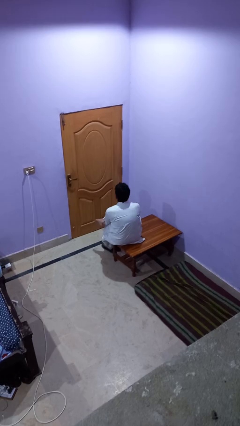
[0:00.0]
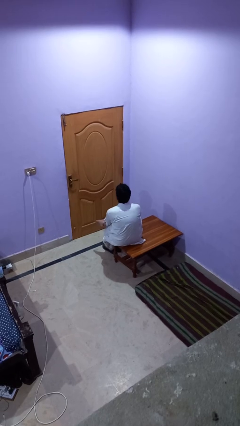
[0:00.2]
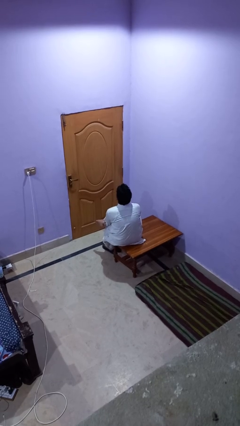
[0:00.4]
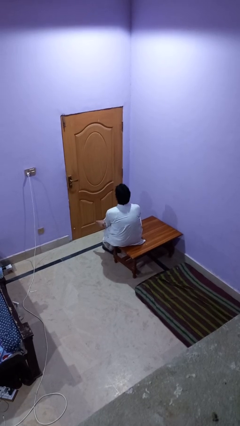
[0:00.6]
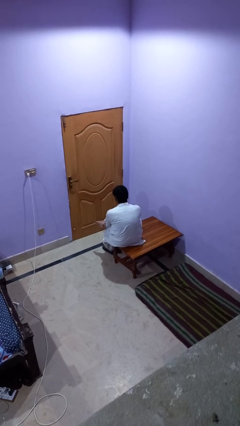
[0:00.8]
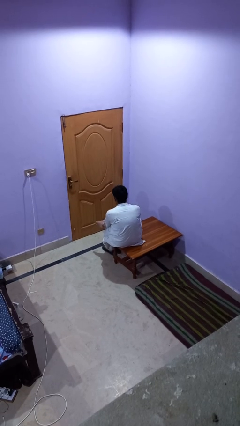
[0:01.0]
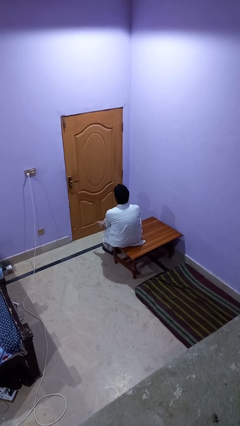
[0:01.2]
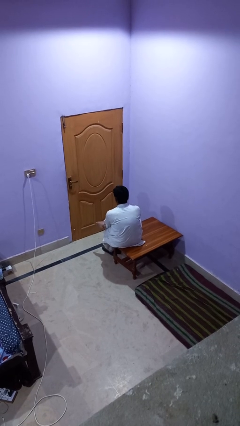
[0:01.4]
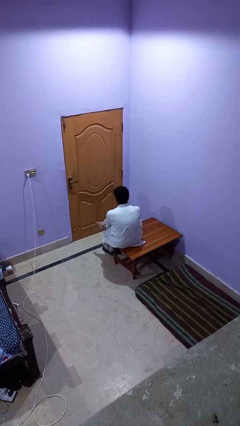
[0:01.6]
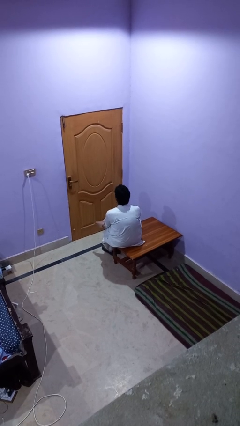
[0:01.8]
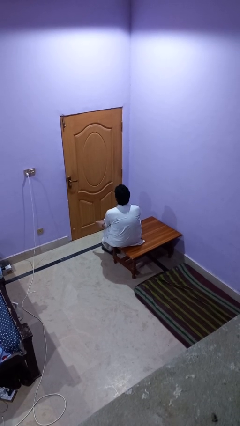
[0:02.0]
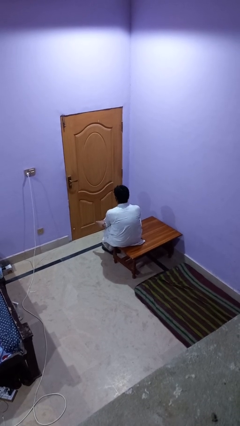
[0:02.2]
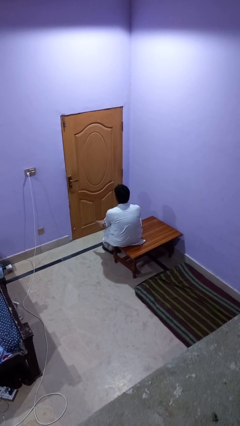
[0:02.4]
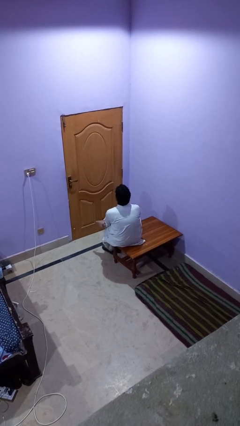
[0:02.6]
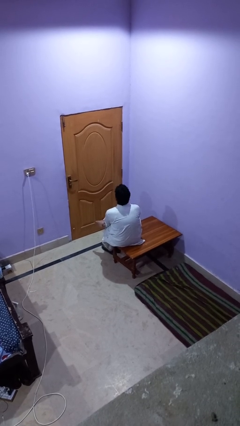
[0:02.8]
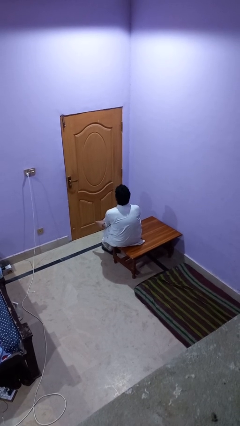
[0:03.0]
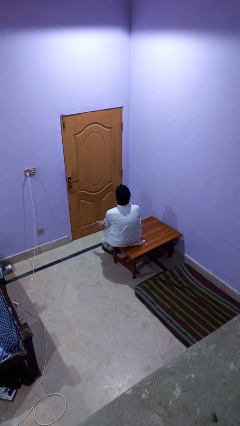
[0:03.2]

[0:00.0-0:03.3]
person nods head

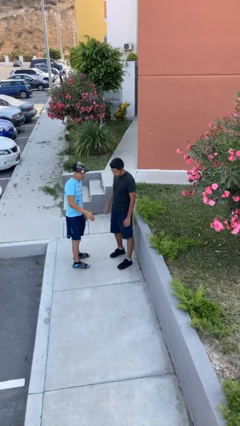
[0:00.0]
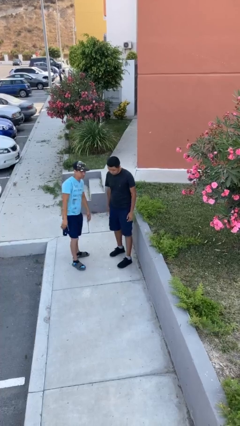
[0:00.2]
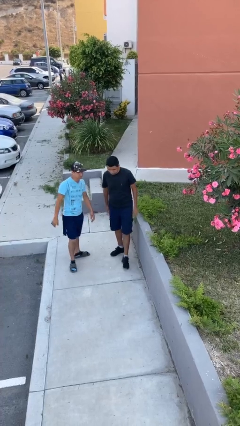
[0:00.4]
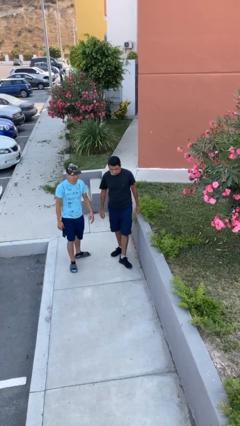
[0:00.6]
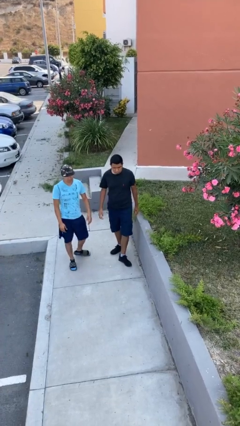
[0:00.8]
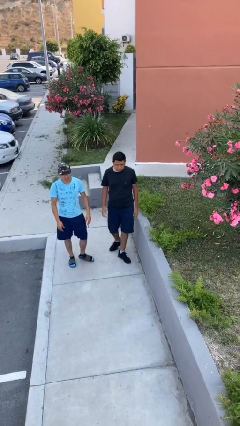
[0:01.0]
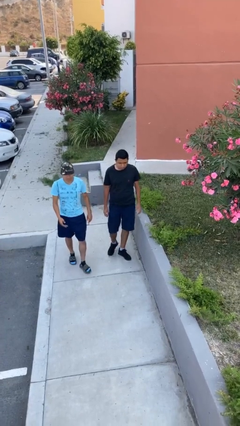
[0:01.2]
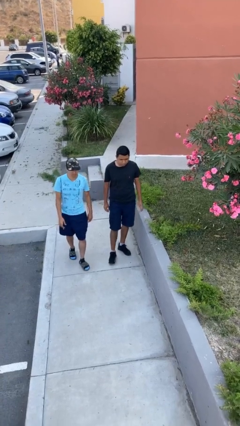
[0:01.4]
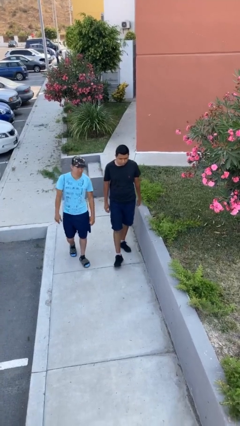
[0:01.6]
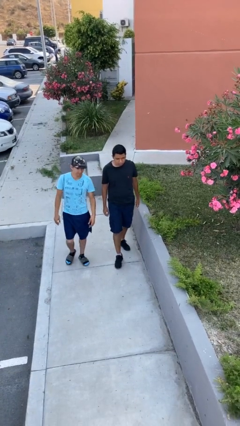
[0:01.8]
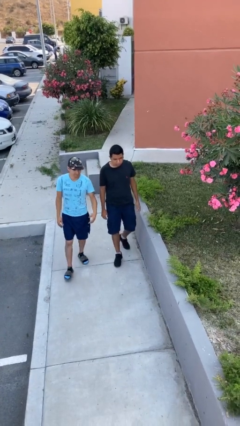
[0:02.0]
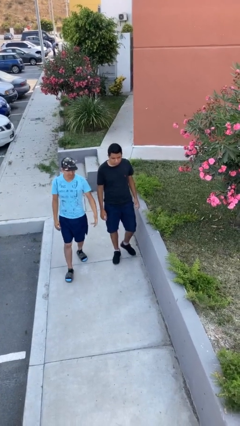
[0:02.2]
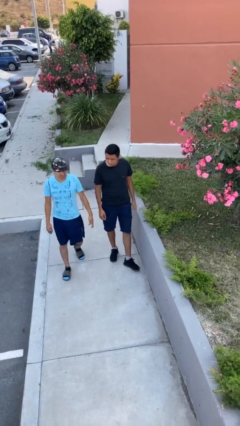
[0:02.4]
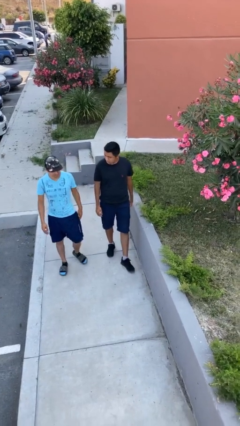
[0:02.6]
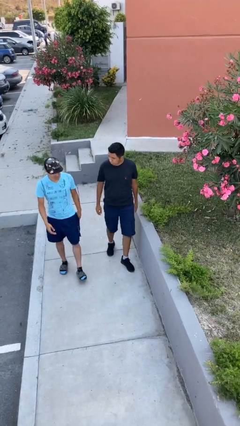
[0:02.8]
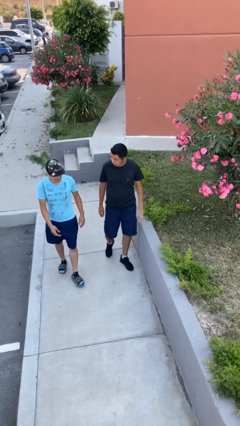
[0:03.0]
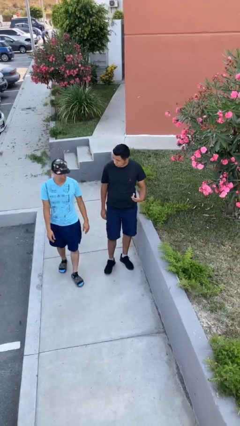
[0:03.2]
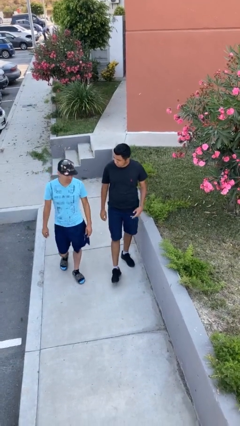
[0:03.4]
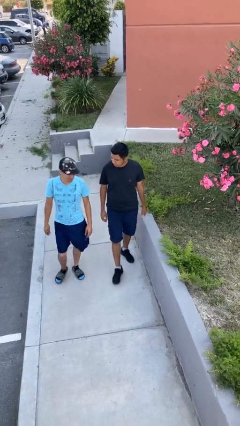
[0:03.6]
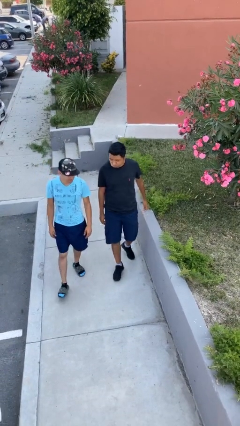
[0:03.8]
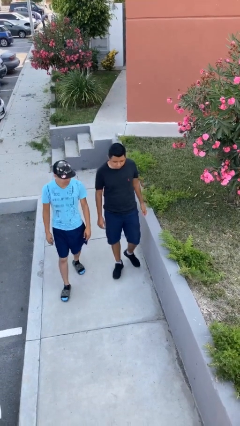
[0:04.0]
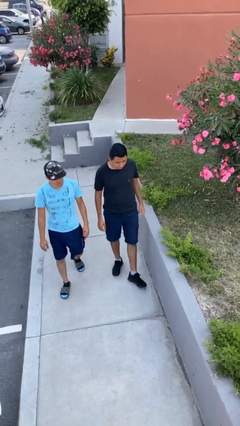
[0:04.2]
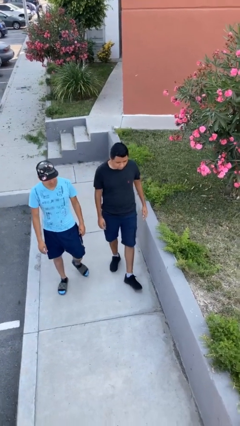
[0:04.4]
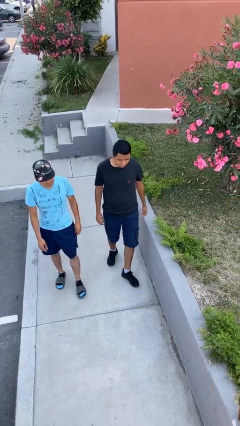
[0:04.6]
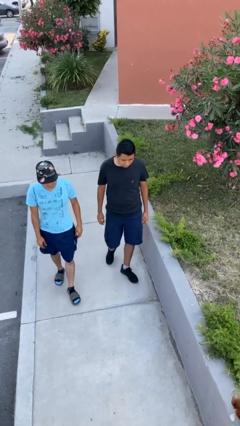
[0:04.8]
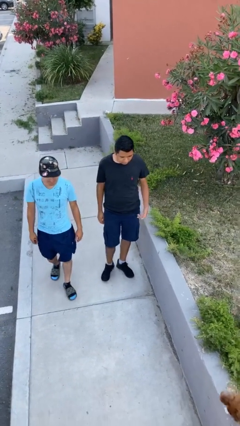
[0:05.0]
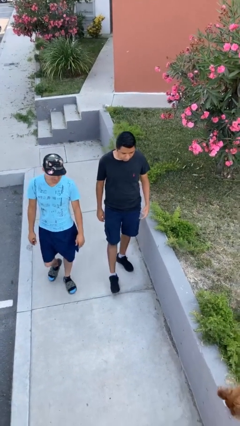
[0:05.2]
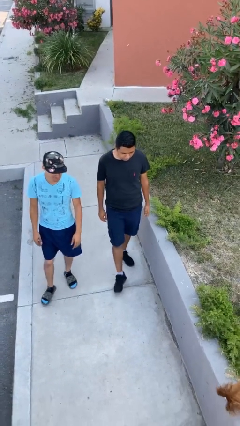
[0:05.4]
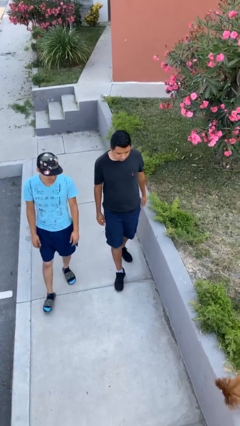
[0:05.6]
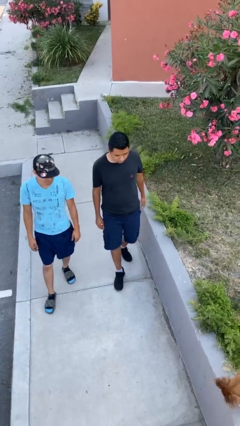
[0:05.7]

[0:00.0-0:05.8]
person talks to person

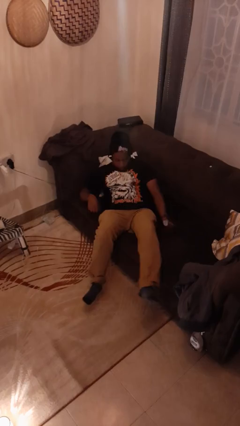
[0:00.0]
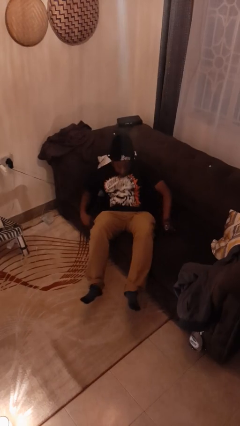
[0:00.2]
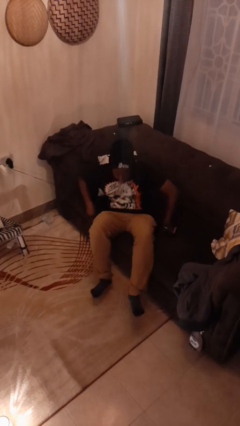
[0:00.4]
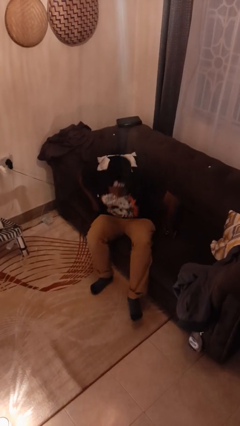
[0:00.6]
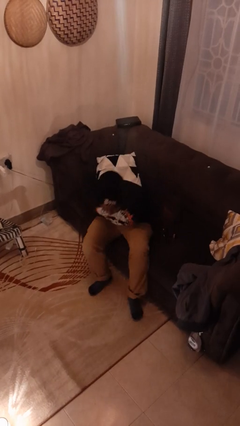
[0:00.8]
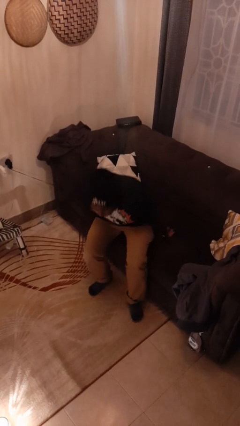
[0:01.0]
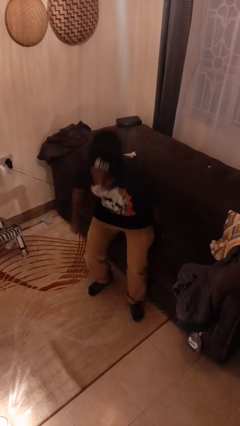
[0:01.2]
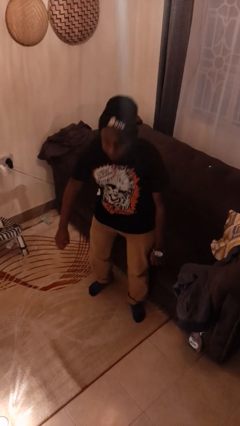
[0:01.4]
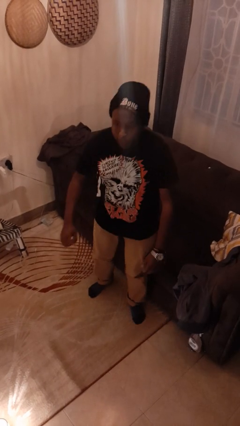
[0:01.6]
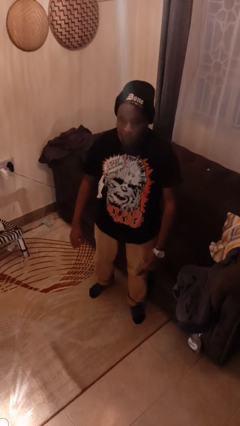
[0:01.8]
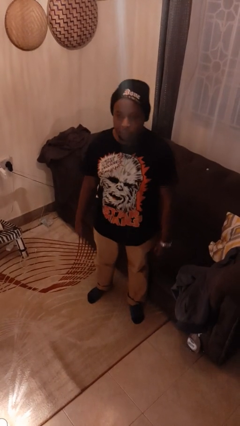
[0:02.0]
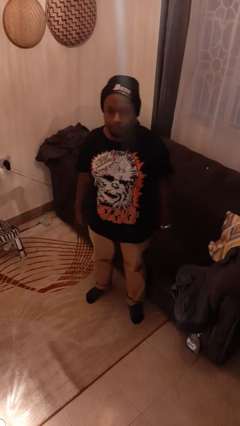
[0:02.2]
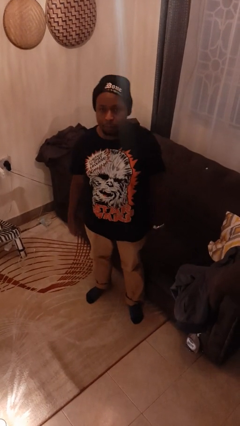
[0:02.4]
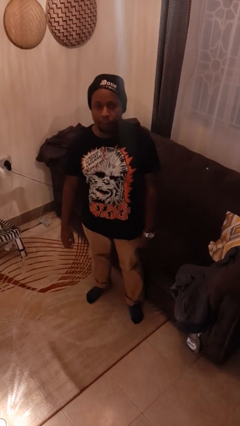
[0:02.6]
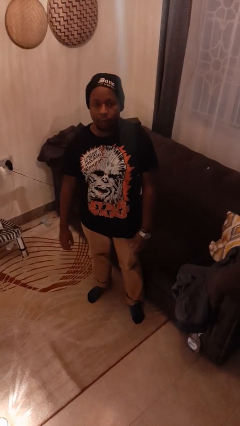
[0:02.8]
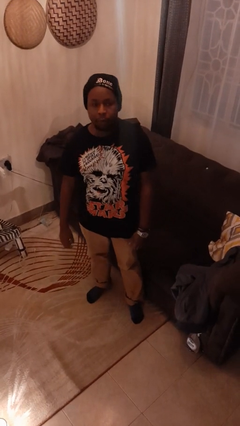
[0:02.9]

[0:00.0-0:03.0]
person stands up

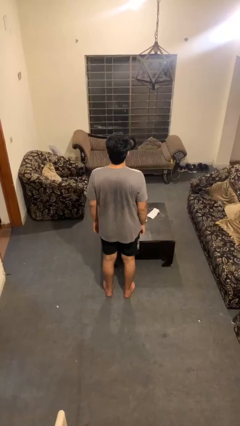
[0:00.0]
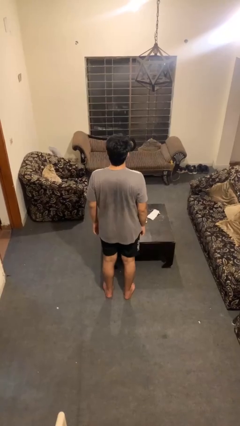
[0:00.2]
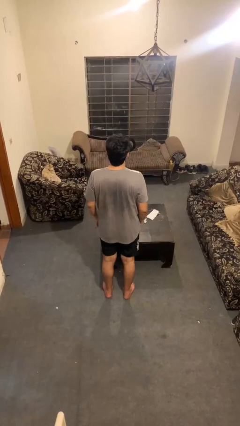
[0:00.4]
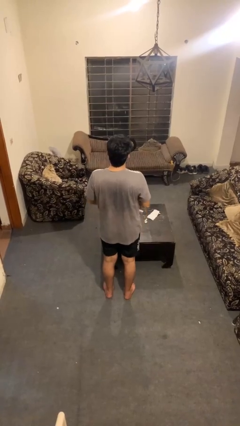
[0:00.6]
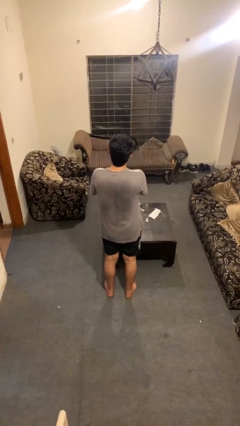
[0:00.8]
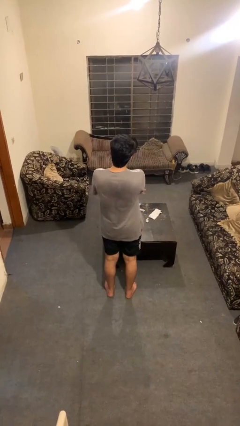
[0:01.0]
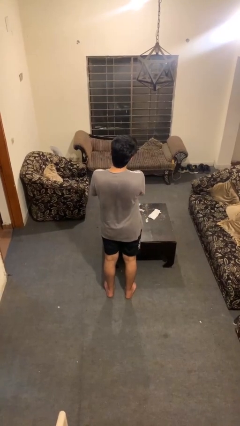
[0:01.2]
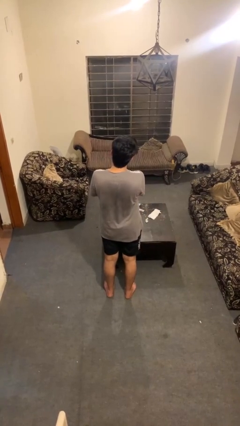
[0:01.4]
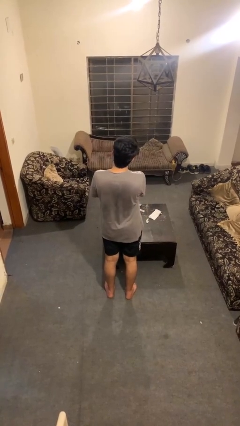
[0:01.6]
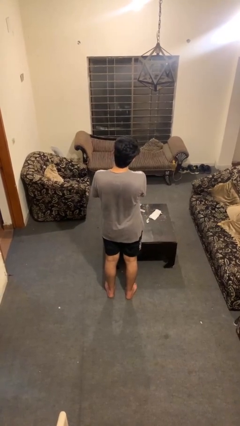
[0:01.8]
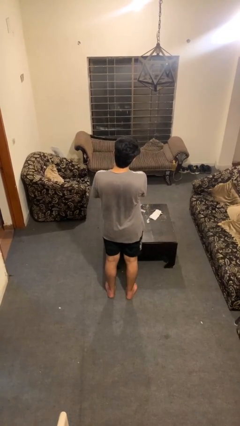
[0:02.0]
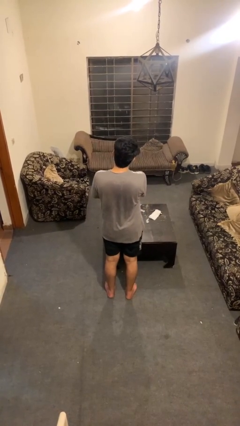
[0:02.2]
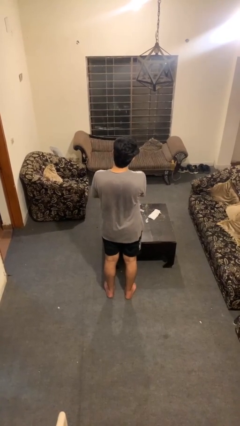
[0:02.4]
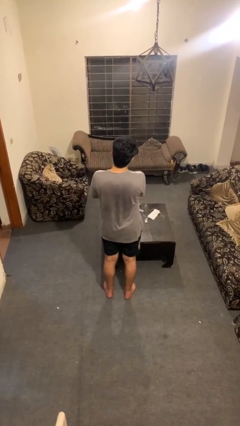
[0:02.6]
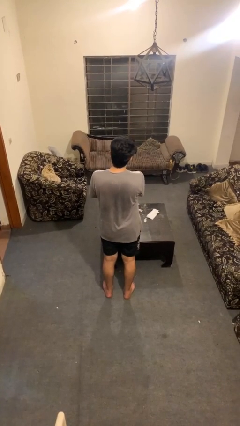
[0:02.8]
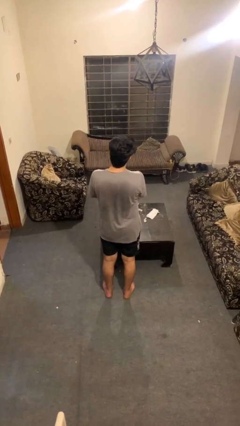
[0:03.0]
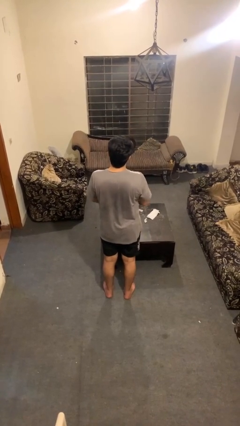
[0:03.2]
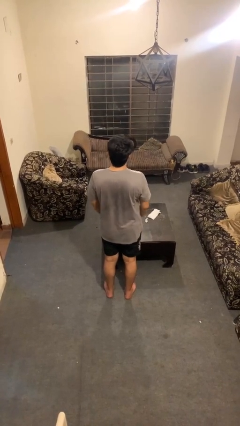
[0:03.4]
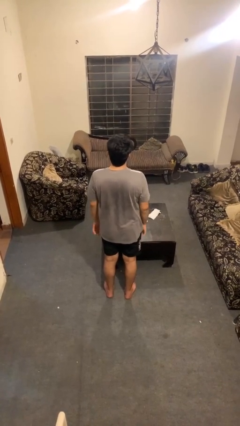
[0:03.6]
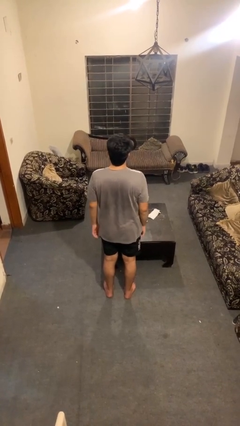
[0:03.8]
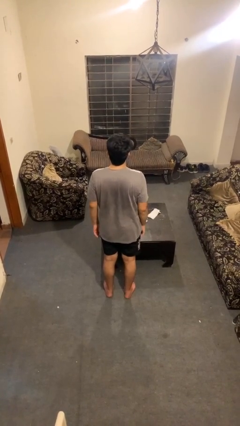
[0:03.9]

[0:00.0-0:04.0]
person strokes chin

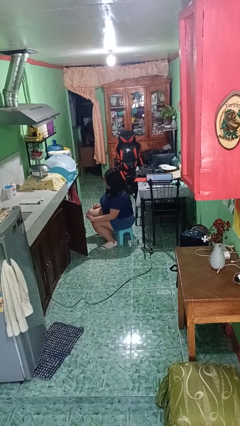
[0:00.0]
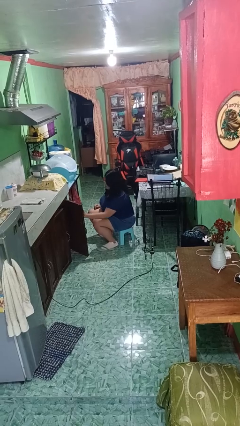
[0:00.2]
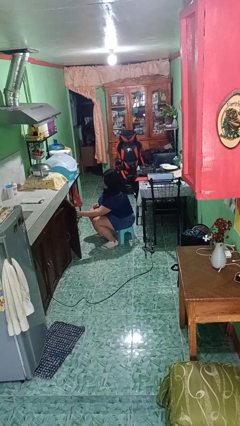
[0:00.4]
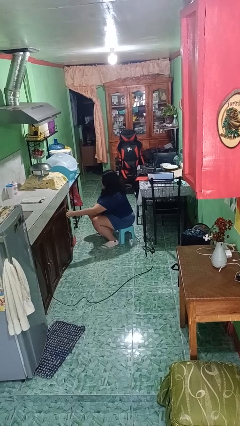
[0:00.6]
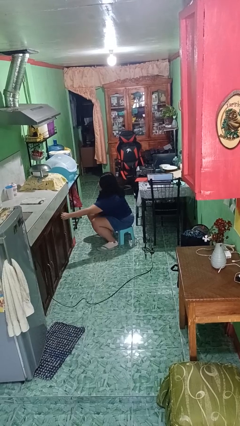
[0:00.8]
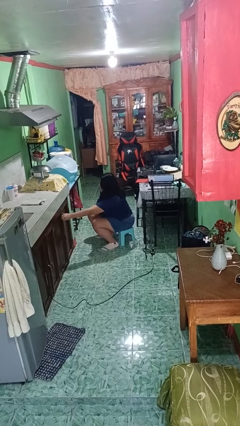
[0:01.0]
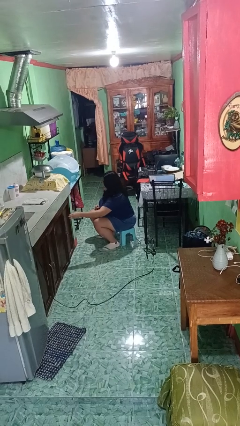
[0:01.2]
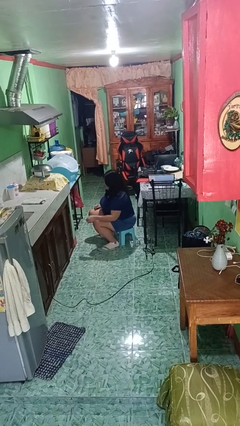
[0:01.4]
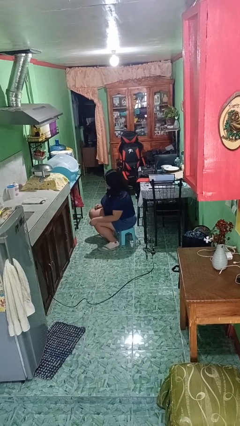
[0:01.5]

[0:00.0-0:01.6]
person closes cabinet
